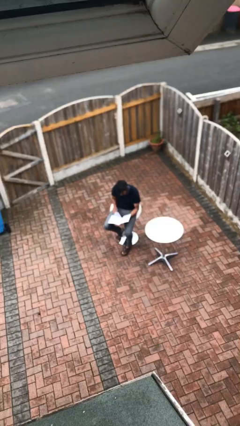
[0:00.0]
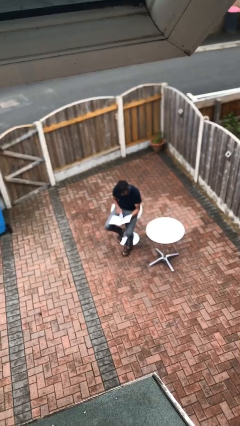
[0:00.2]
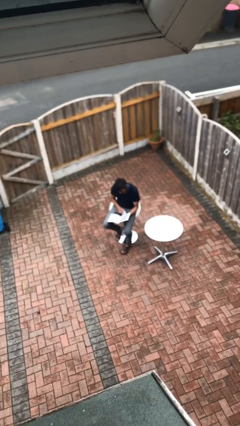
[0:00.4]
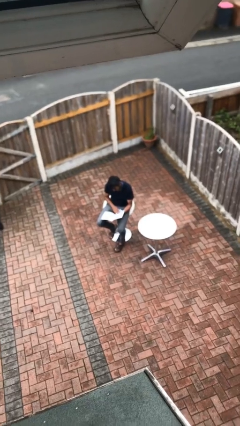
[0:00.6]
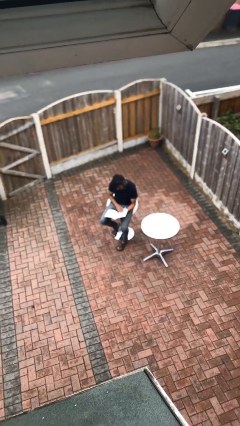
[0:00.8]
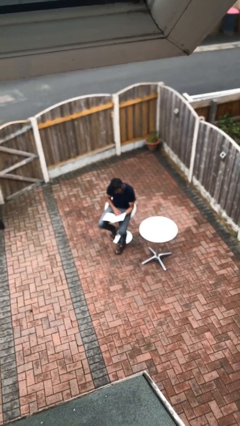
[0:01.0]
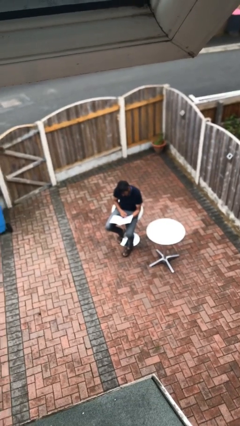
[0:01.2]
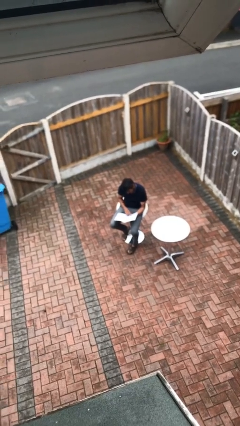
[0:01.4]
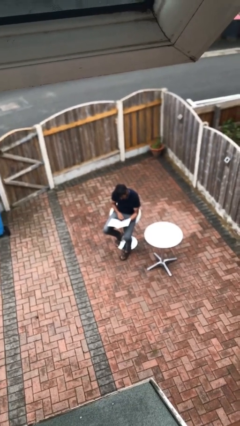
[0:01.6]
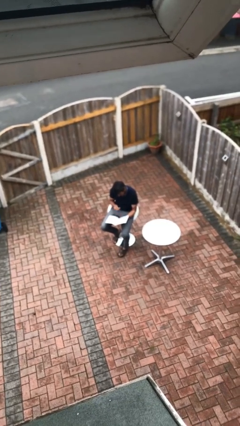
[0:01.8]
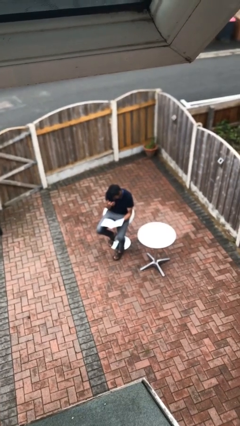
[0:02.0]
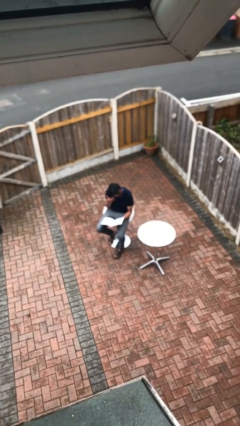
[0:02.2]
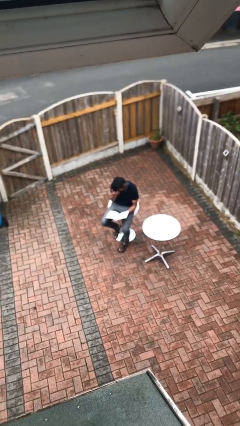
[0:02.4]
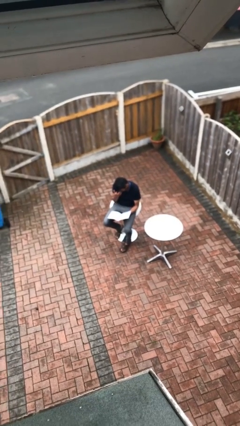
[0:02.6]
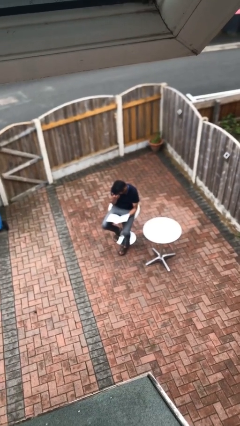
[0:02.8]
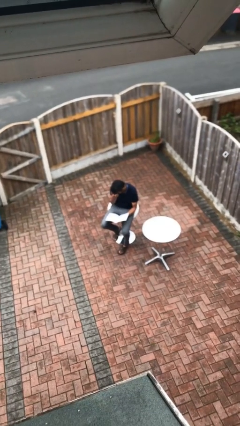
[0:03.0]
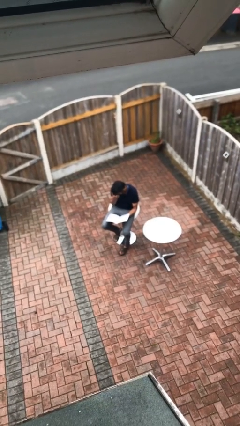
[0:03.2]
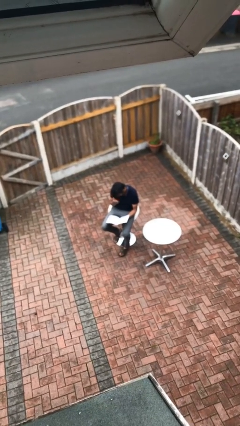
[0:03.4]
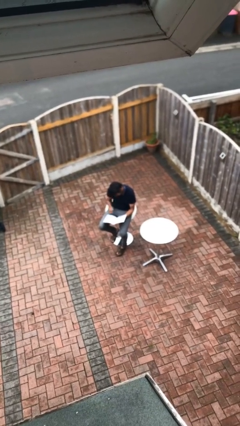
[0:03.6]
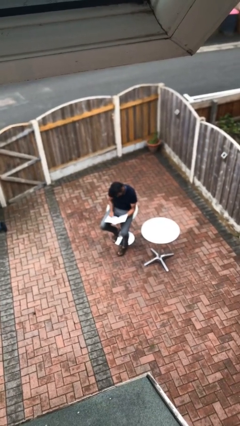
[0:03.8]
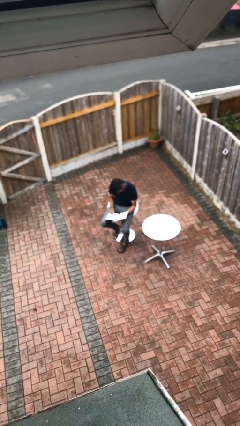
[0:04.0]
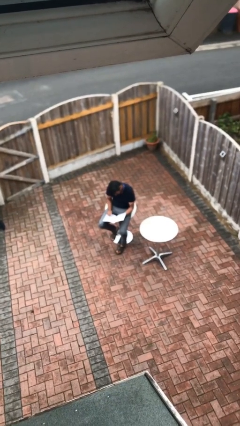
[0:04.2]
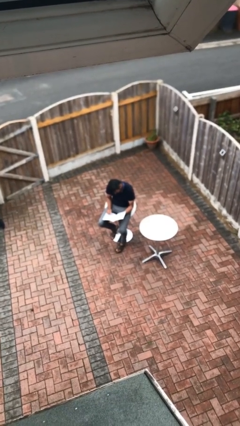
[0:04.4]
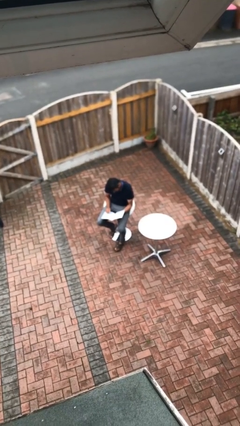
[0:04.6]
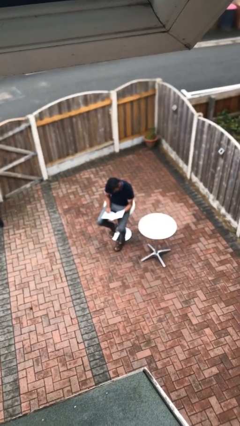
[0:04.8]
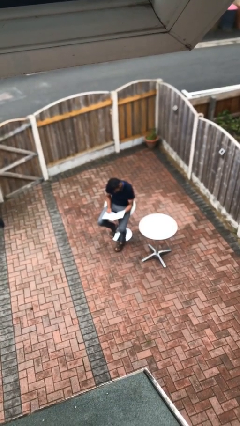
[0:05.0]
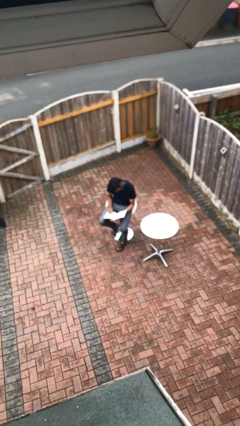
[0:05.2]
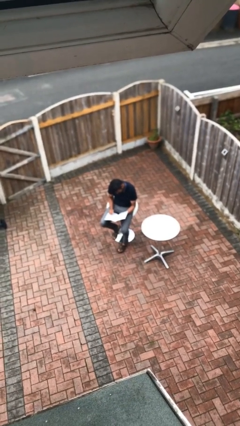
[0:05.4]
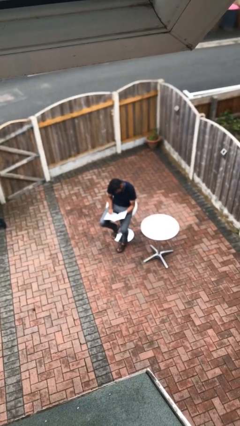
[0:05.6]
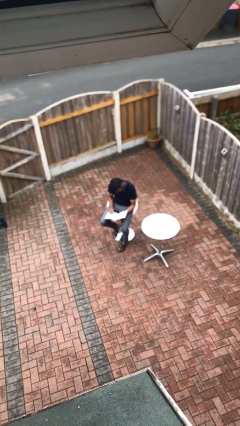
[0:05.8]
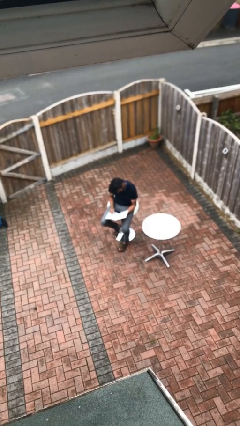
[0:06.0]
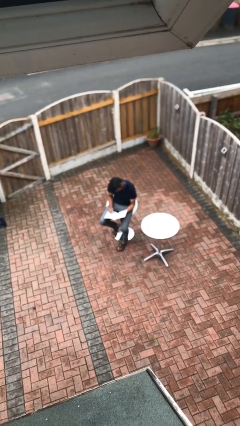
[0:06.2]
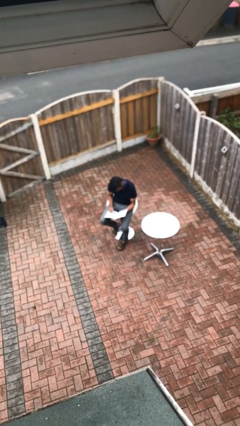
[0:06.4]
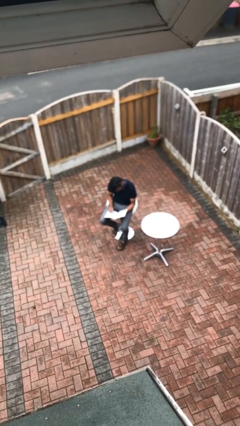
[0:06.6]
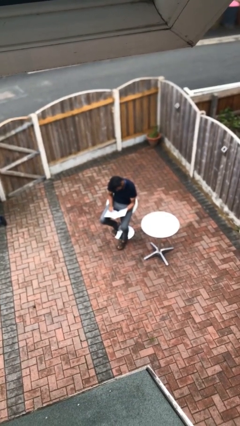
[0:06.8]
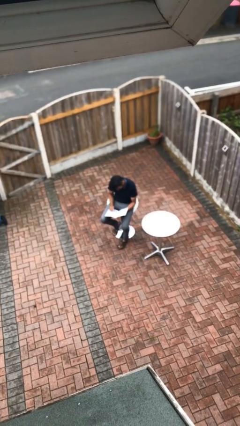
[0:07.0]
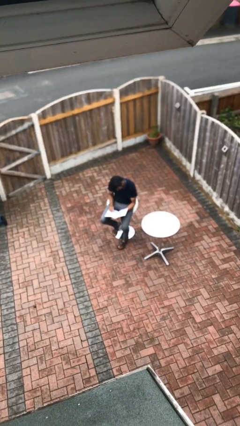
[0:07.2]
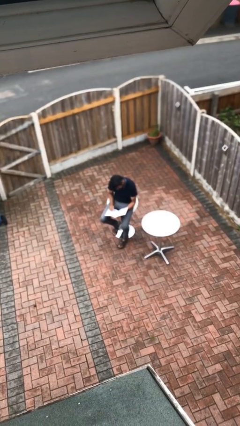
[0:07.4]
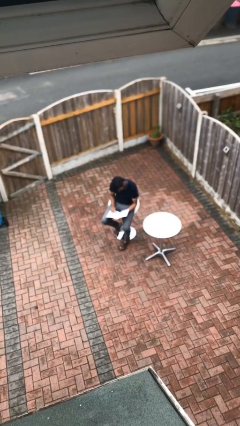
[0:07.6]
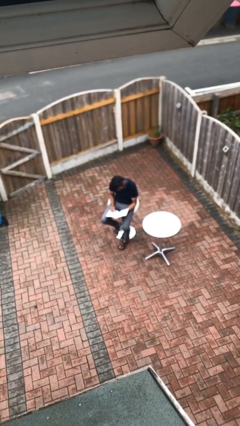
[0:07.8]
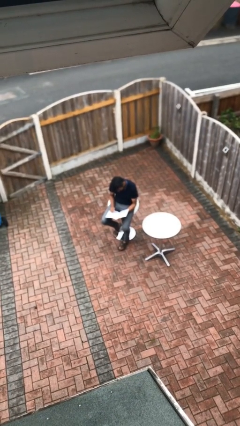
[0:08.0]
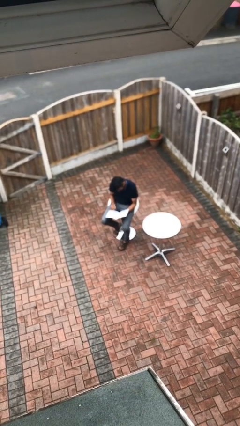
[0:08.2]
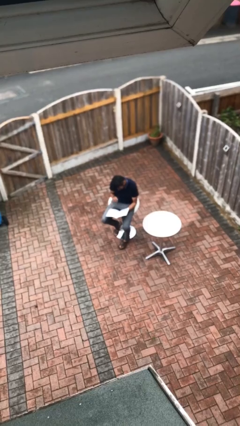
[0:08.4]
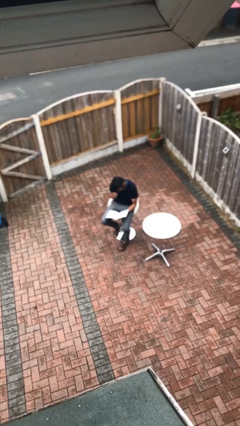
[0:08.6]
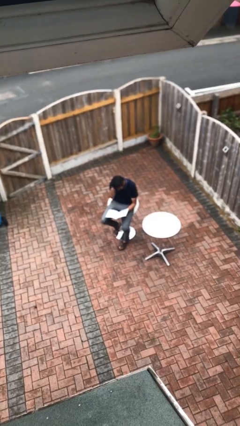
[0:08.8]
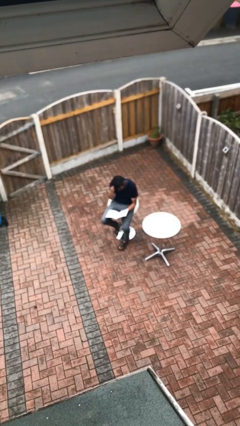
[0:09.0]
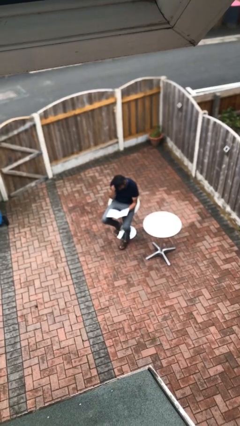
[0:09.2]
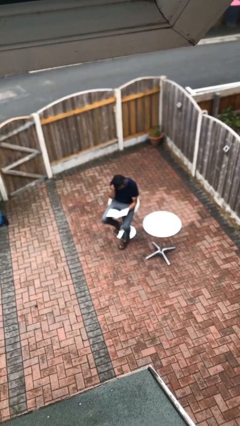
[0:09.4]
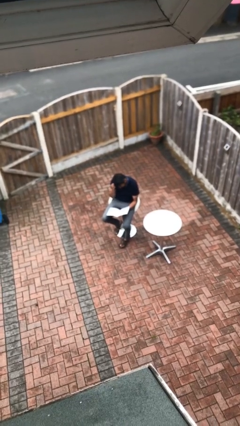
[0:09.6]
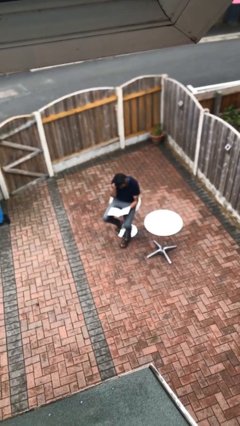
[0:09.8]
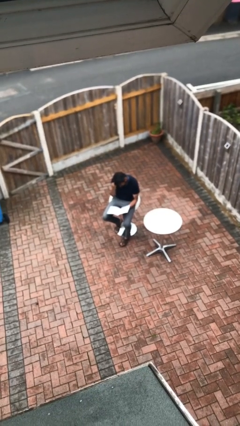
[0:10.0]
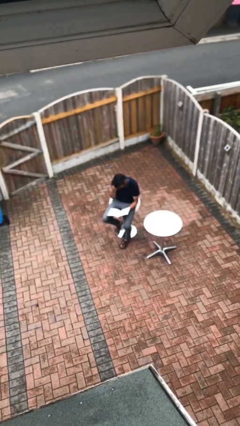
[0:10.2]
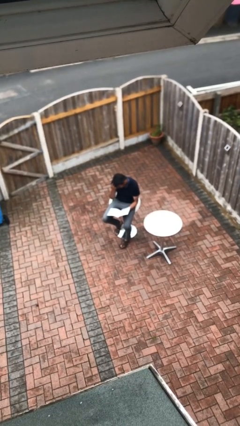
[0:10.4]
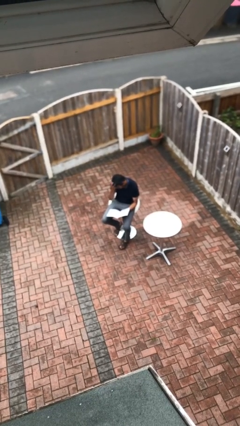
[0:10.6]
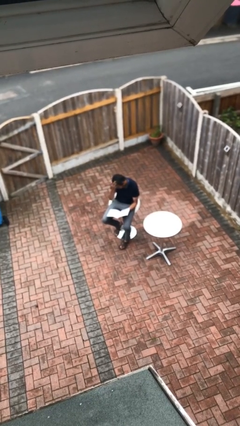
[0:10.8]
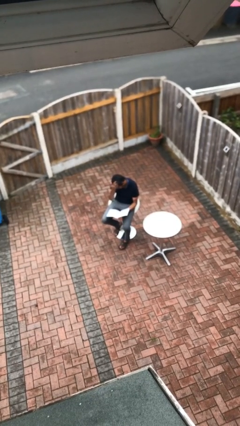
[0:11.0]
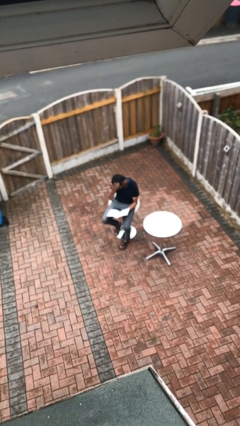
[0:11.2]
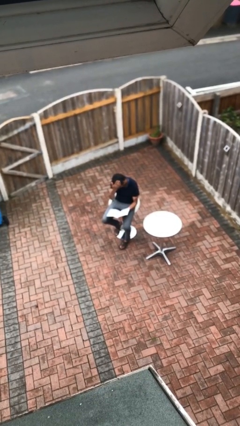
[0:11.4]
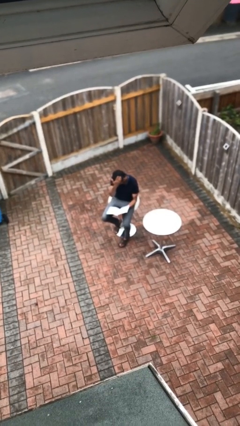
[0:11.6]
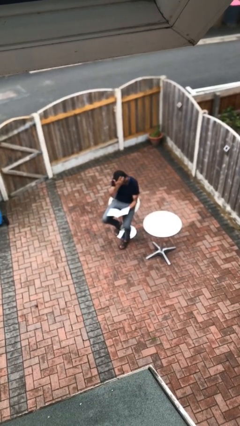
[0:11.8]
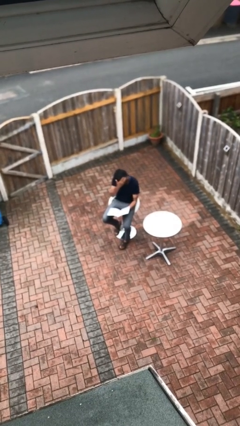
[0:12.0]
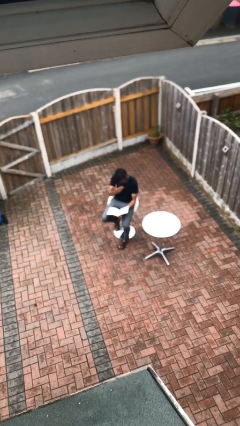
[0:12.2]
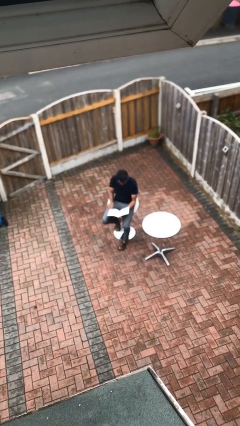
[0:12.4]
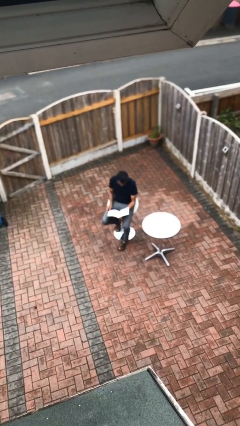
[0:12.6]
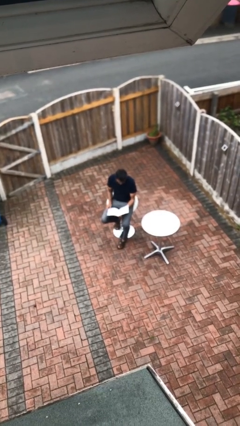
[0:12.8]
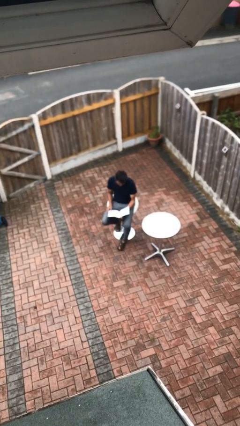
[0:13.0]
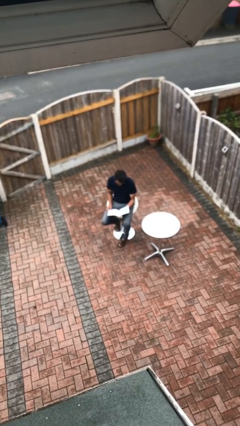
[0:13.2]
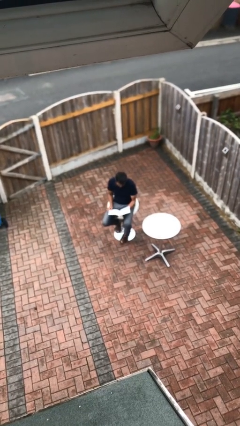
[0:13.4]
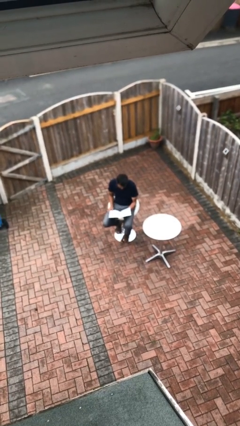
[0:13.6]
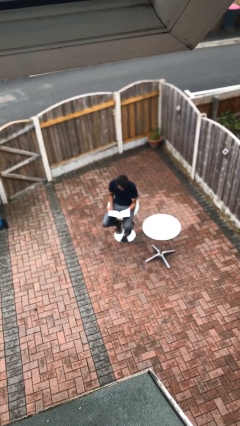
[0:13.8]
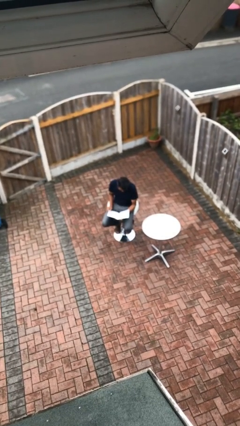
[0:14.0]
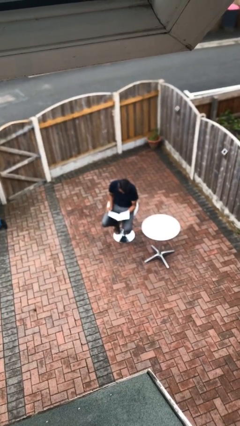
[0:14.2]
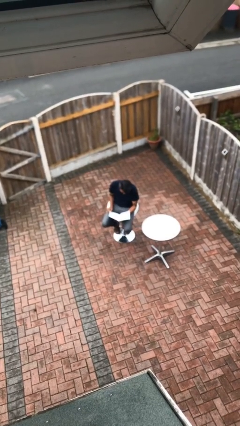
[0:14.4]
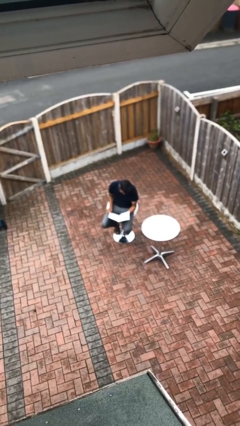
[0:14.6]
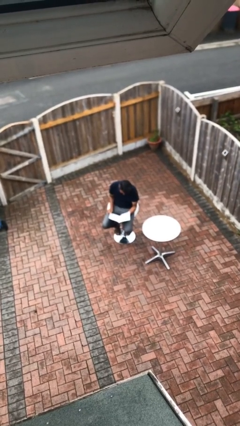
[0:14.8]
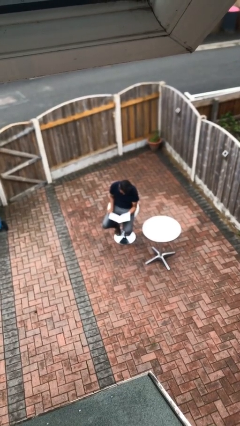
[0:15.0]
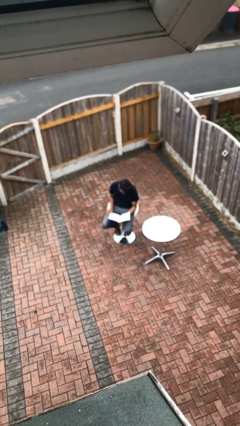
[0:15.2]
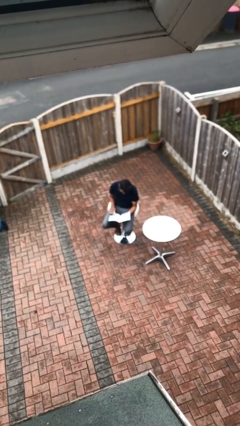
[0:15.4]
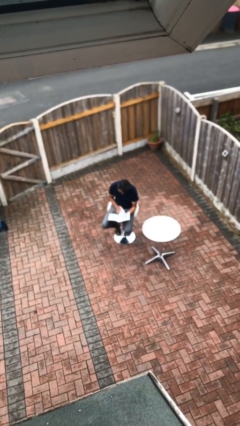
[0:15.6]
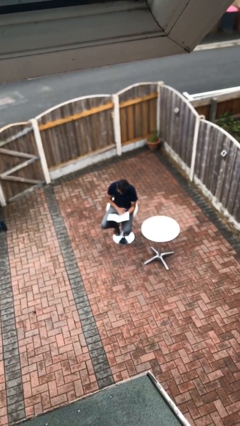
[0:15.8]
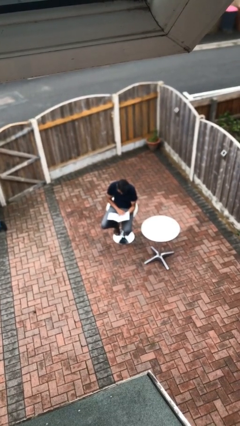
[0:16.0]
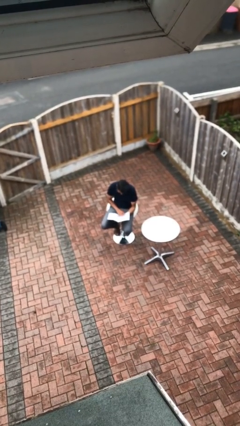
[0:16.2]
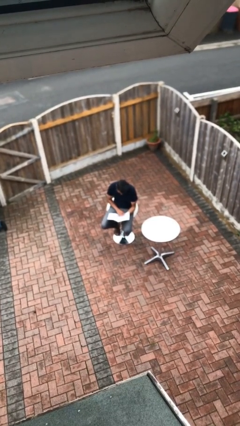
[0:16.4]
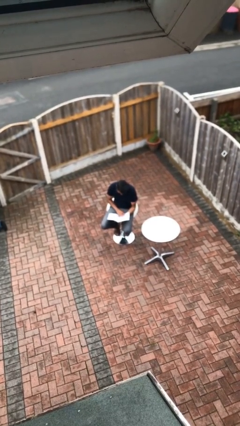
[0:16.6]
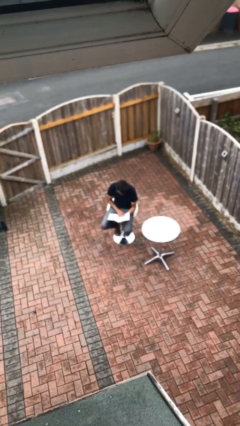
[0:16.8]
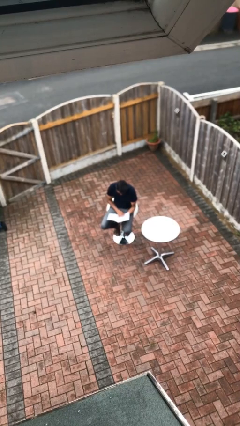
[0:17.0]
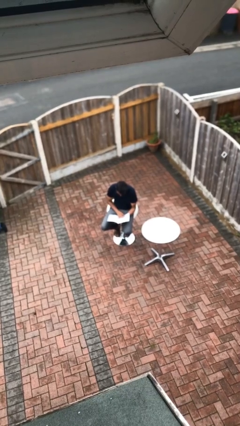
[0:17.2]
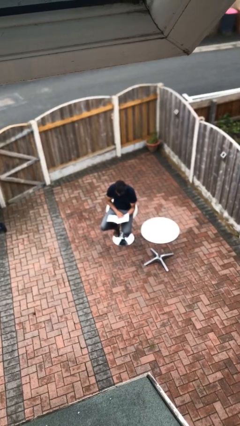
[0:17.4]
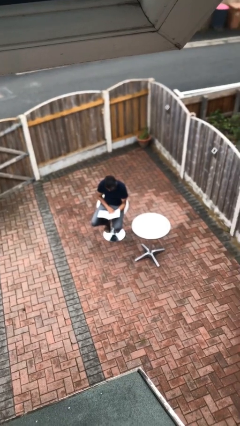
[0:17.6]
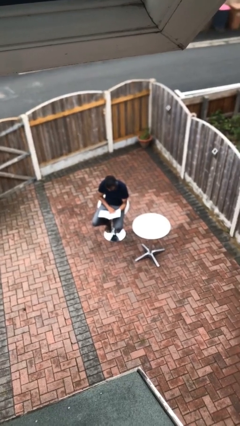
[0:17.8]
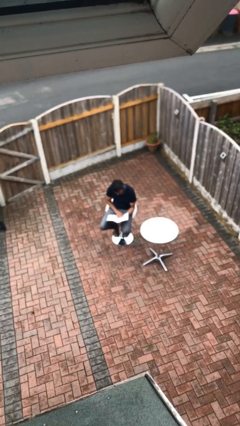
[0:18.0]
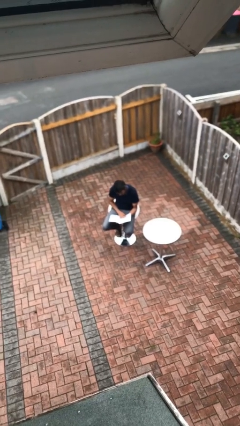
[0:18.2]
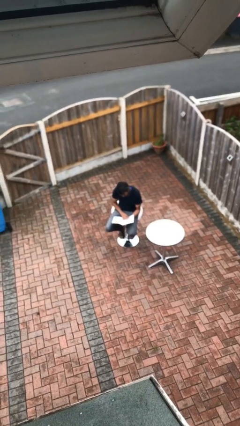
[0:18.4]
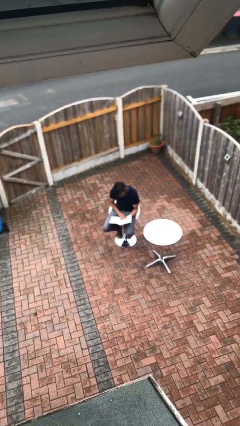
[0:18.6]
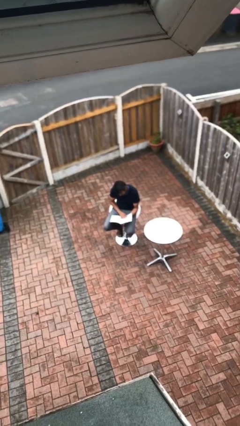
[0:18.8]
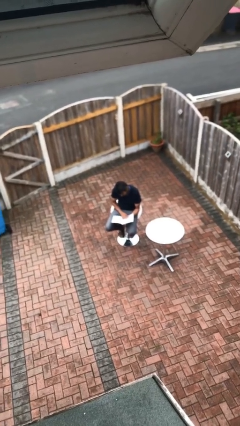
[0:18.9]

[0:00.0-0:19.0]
person reads document
